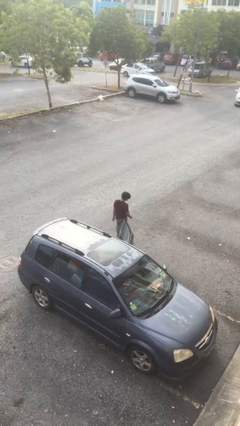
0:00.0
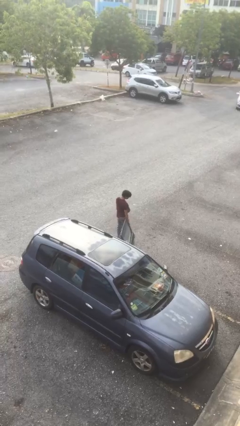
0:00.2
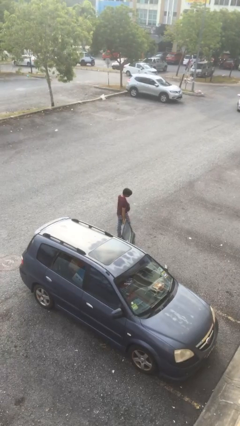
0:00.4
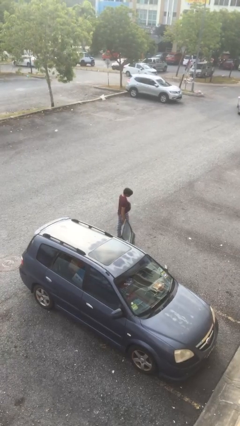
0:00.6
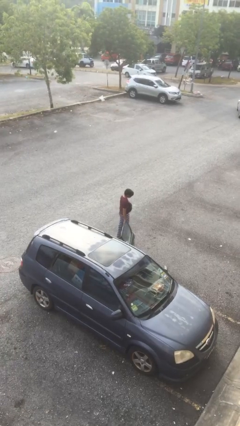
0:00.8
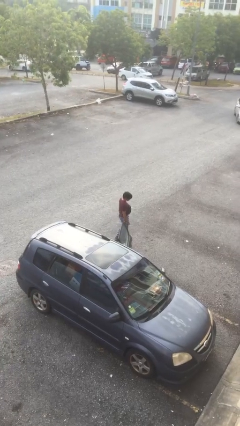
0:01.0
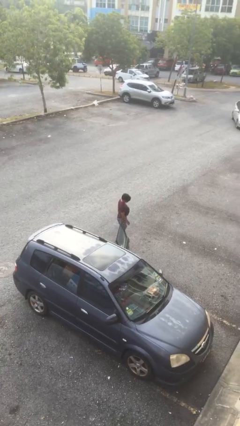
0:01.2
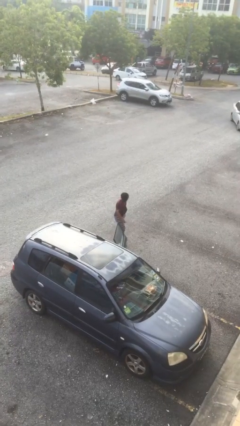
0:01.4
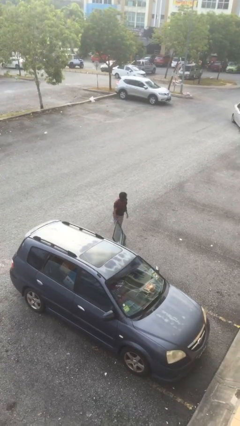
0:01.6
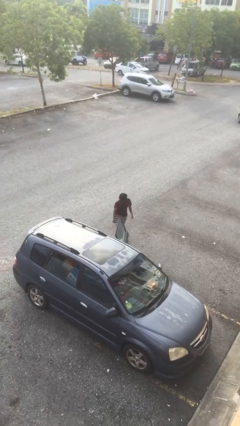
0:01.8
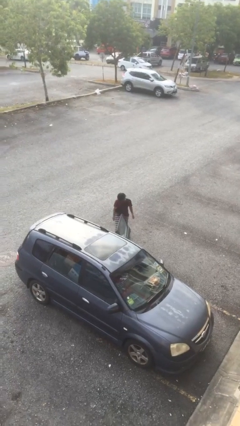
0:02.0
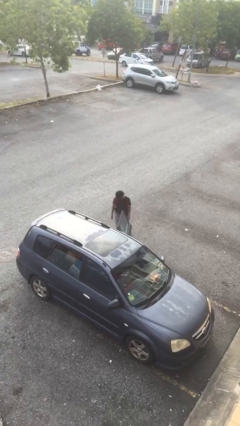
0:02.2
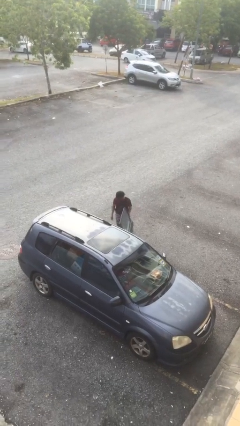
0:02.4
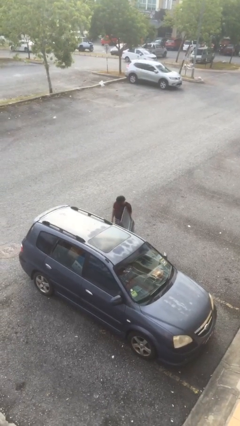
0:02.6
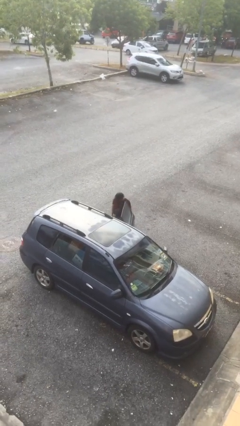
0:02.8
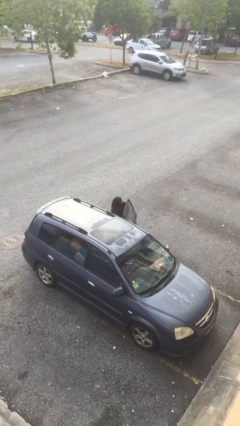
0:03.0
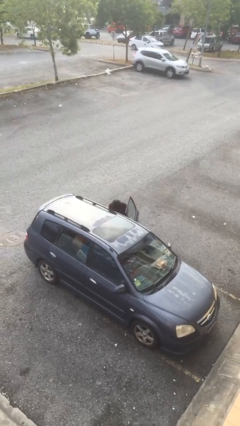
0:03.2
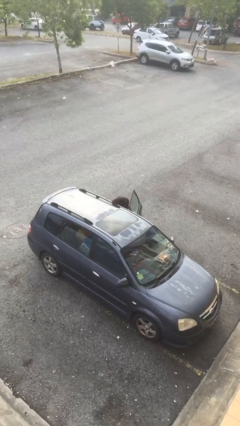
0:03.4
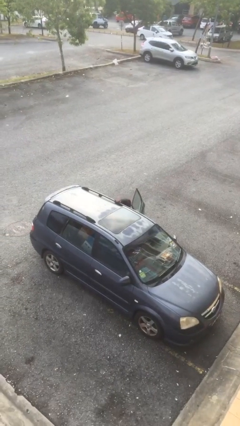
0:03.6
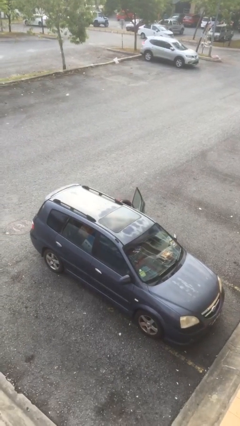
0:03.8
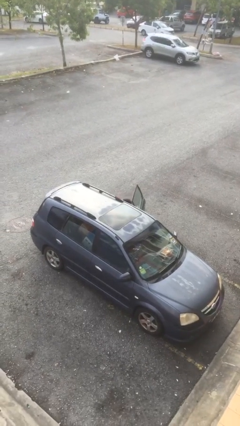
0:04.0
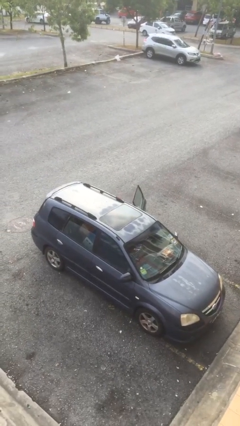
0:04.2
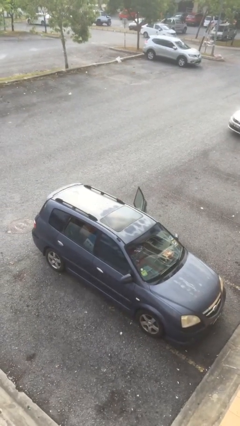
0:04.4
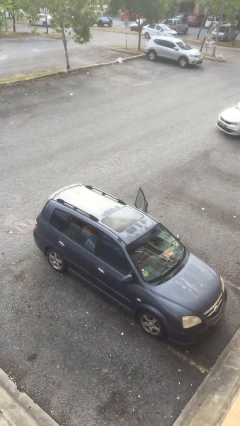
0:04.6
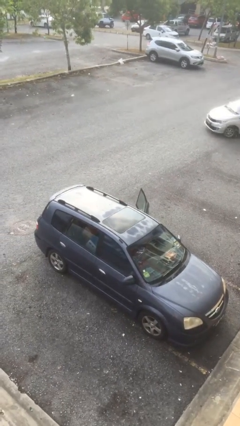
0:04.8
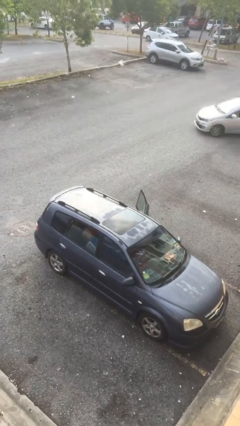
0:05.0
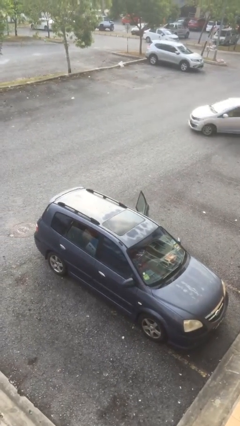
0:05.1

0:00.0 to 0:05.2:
person enters car

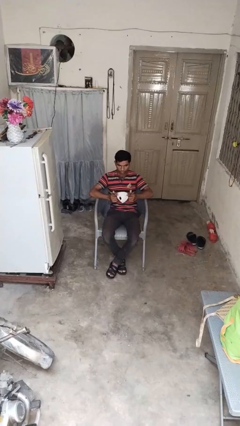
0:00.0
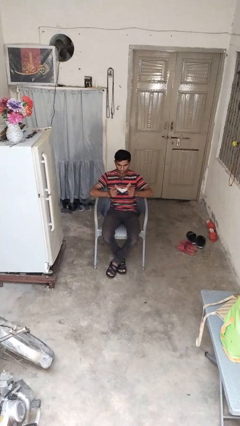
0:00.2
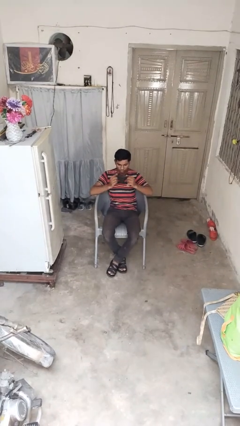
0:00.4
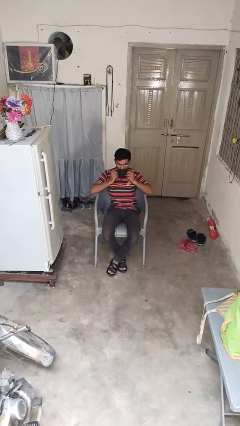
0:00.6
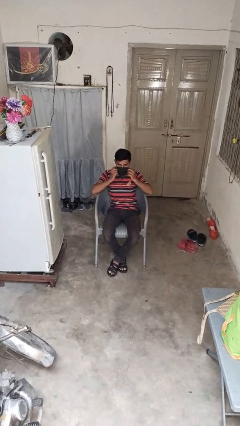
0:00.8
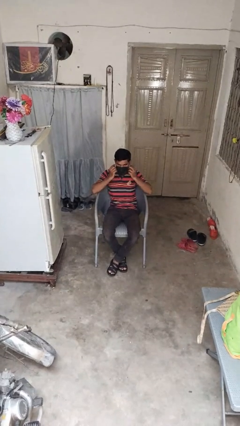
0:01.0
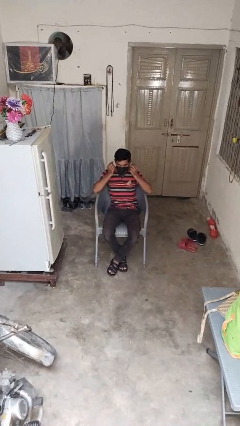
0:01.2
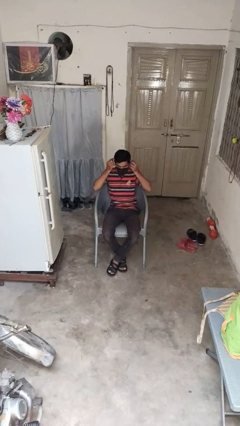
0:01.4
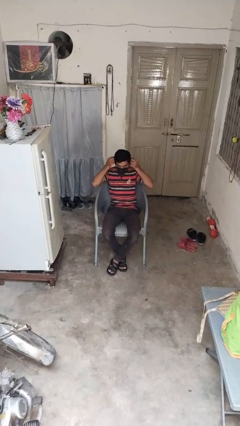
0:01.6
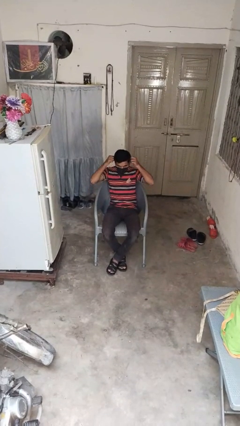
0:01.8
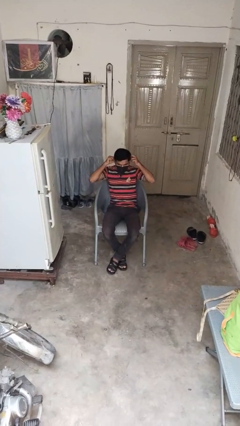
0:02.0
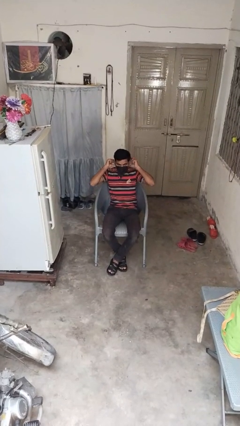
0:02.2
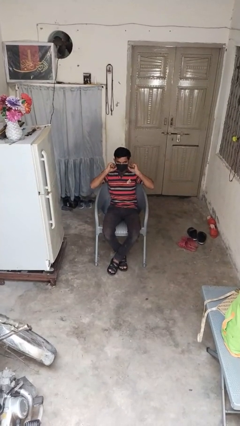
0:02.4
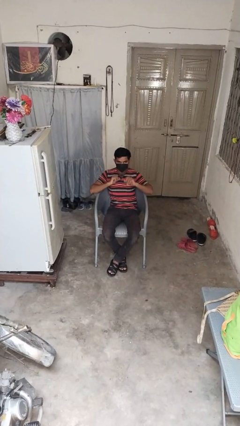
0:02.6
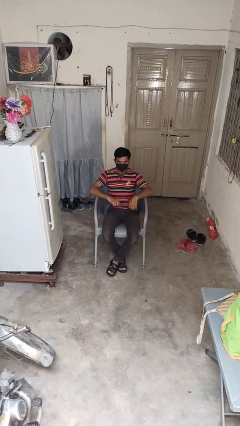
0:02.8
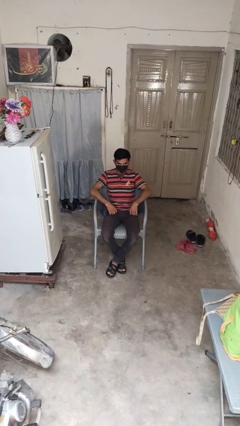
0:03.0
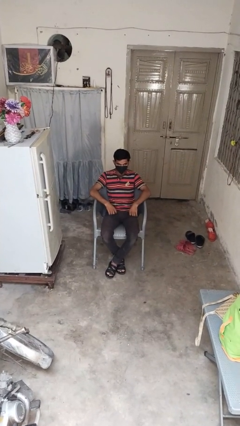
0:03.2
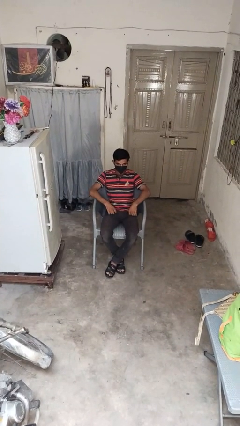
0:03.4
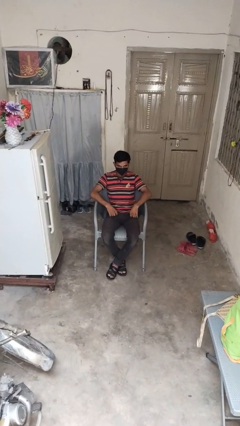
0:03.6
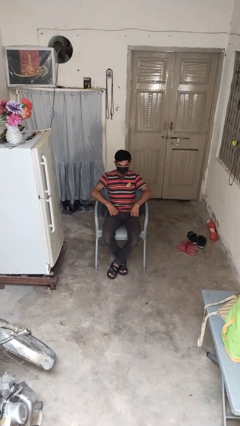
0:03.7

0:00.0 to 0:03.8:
person puts on facemask

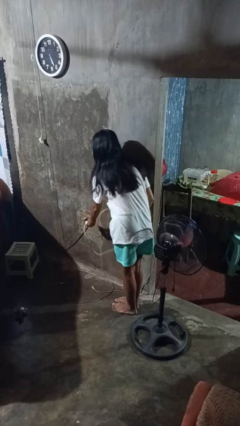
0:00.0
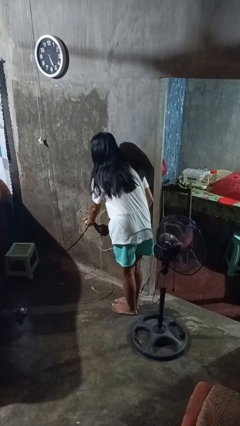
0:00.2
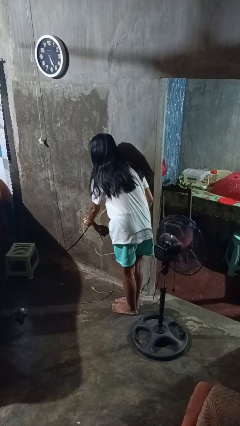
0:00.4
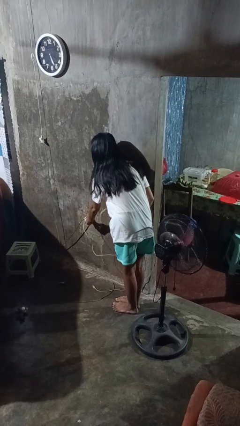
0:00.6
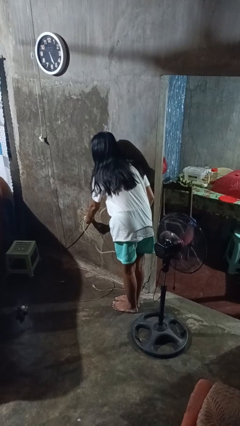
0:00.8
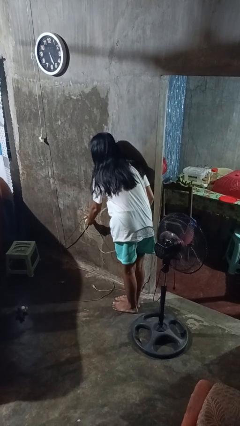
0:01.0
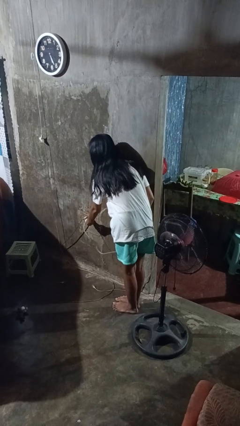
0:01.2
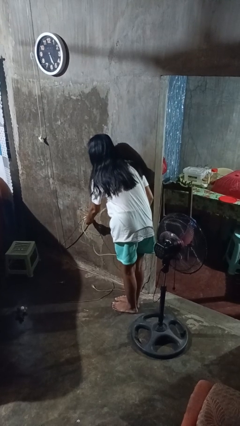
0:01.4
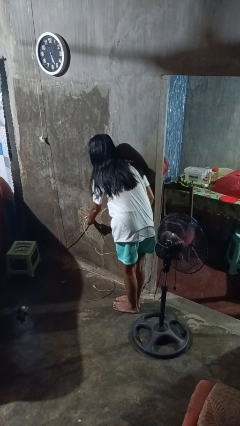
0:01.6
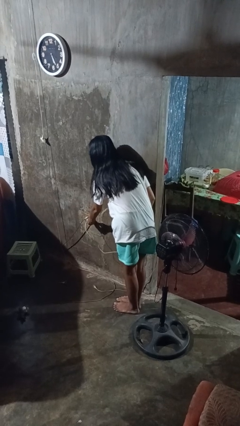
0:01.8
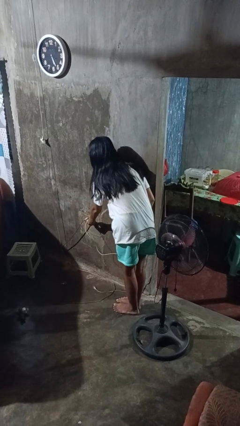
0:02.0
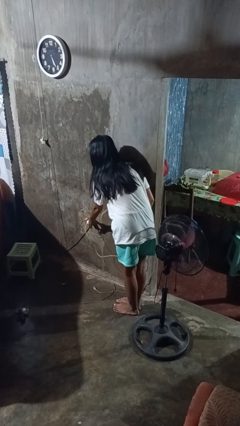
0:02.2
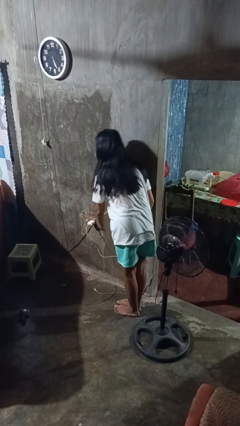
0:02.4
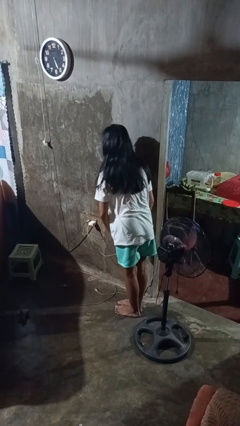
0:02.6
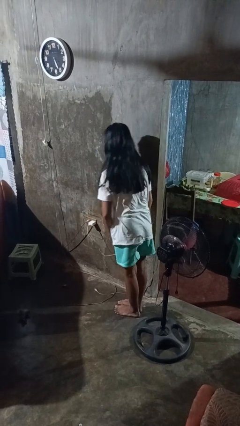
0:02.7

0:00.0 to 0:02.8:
person plugs into electrical socket

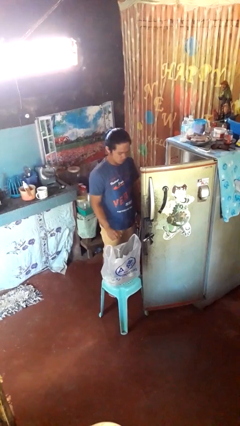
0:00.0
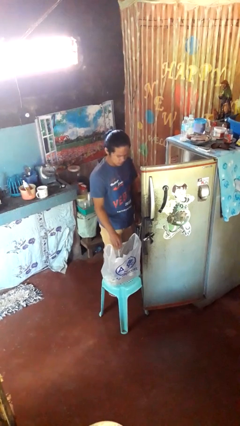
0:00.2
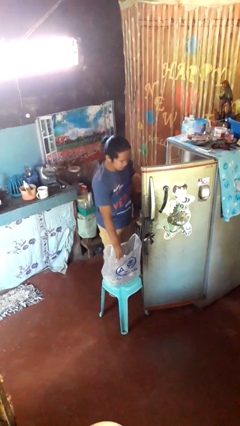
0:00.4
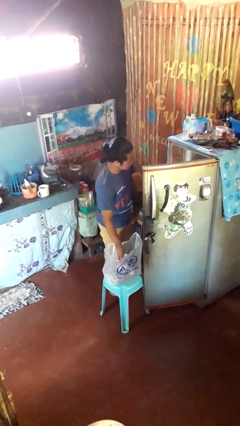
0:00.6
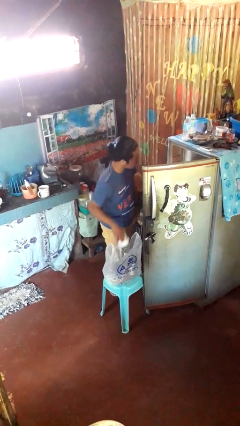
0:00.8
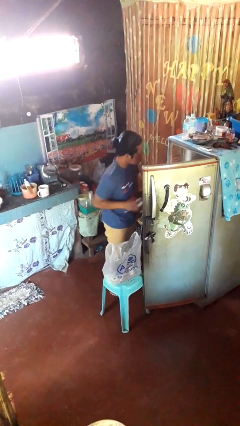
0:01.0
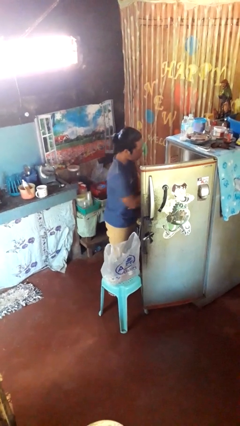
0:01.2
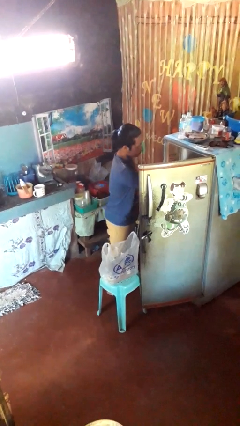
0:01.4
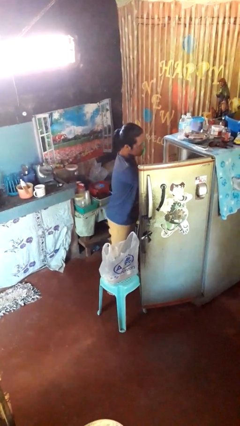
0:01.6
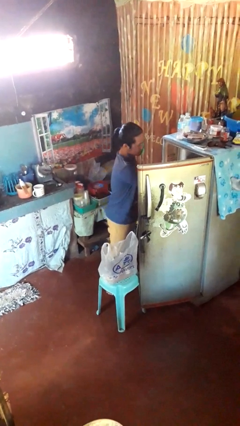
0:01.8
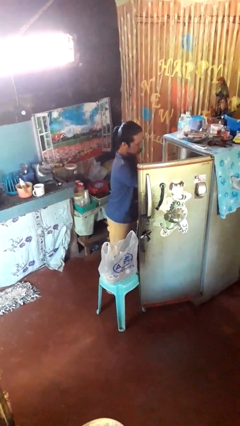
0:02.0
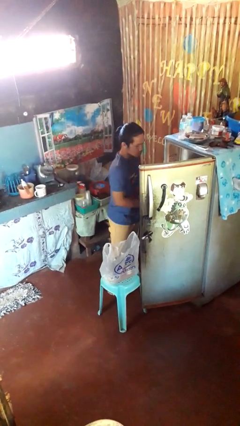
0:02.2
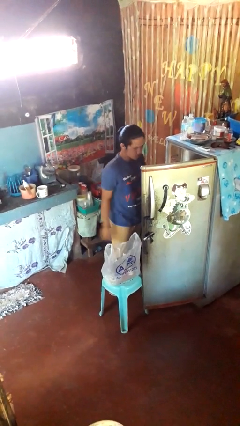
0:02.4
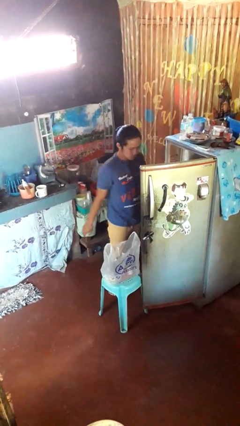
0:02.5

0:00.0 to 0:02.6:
person loads groceries into refrigerator

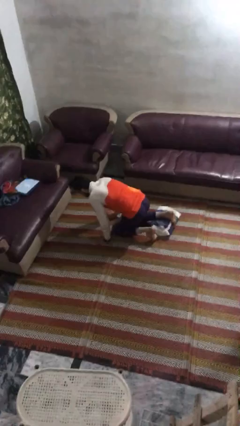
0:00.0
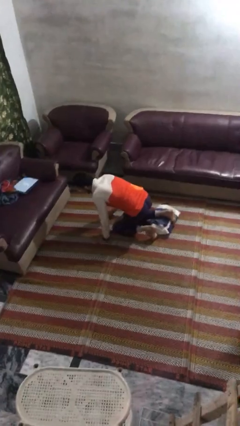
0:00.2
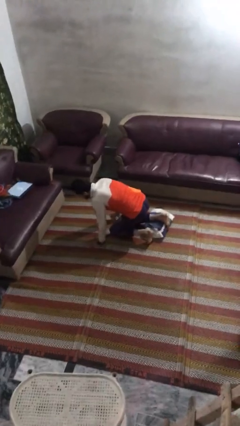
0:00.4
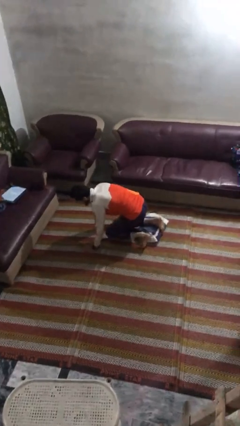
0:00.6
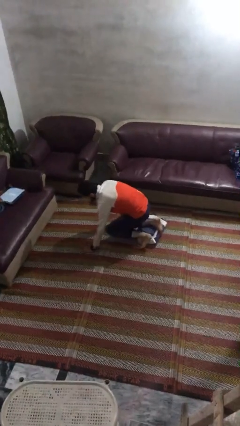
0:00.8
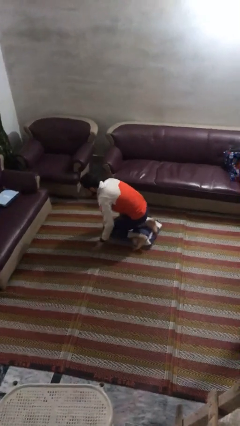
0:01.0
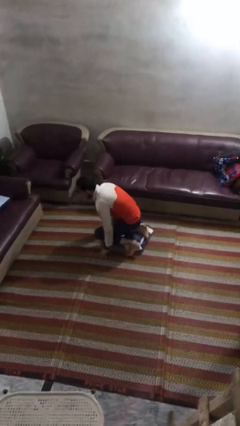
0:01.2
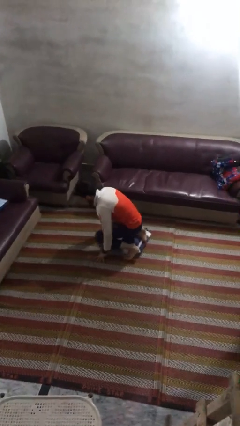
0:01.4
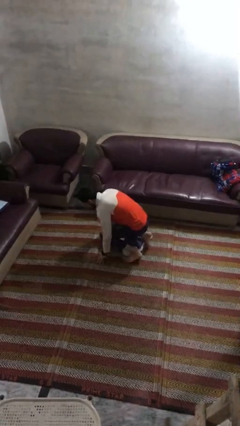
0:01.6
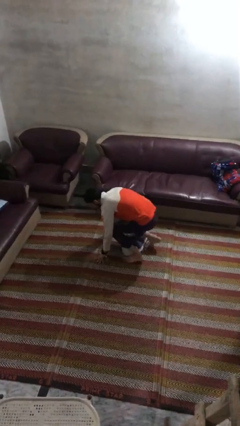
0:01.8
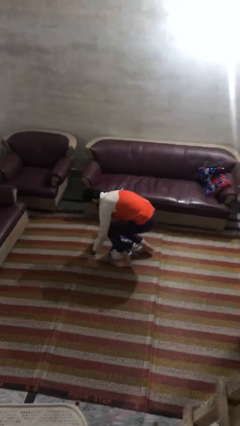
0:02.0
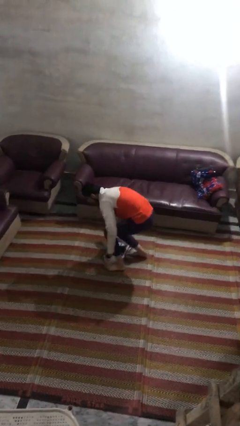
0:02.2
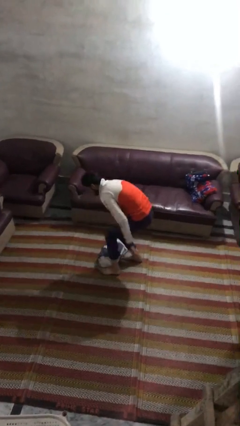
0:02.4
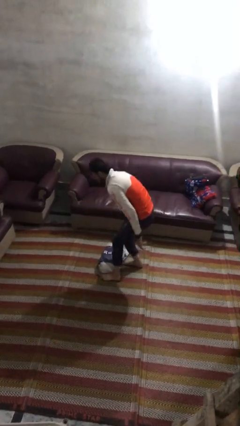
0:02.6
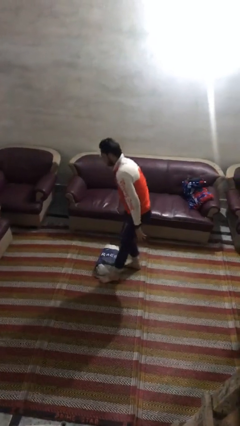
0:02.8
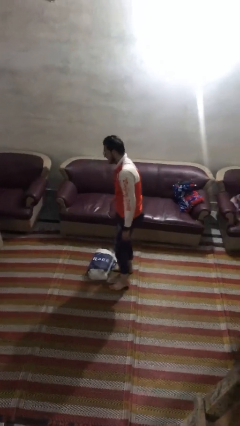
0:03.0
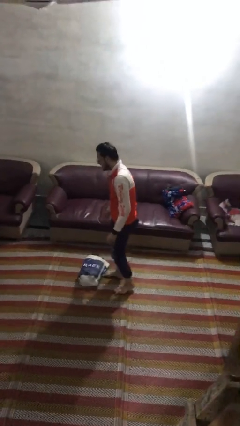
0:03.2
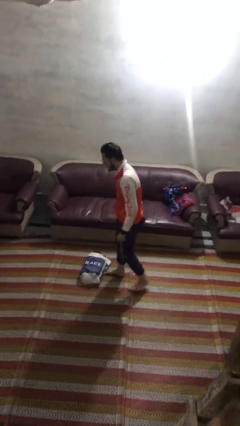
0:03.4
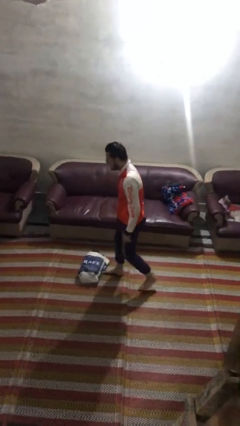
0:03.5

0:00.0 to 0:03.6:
person stands up from floor
